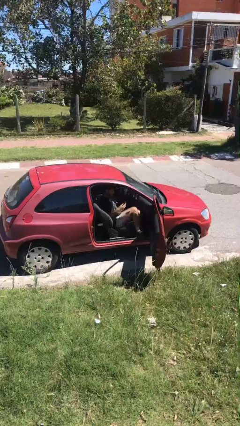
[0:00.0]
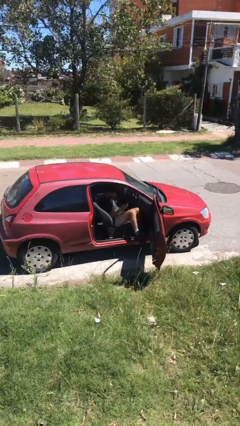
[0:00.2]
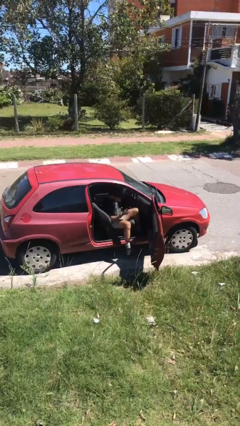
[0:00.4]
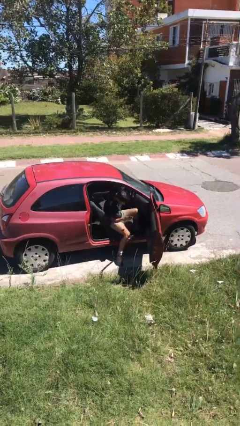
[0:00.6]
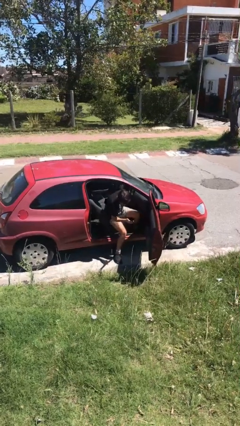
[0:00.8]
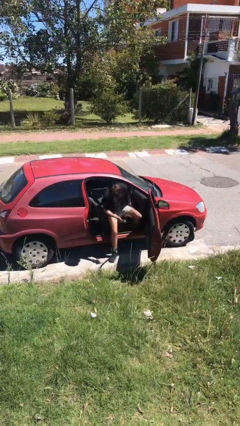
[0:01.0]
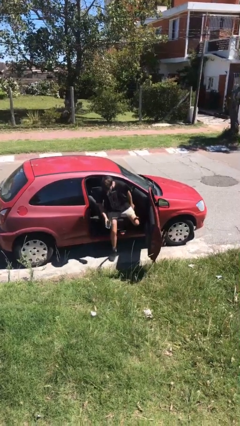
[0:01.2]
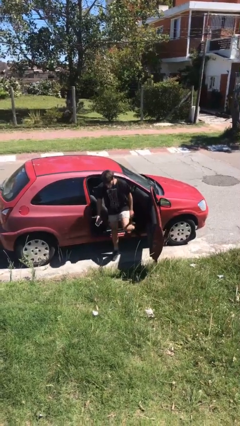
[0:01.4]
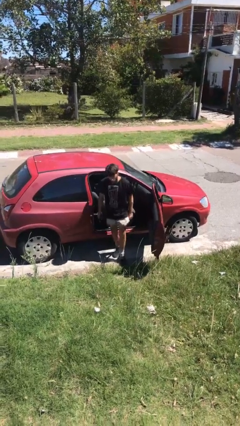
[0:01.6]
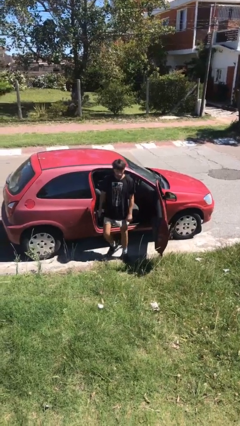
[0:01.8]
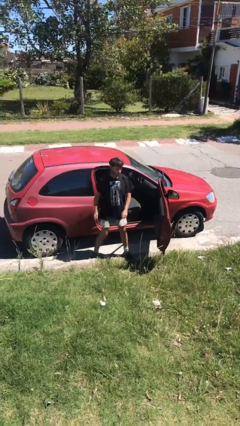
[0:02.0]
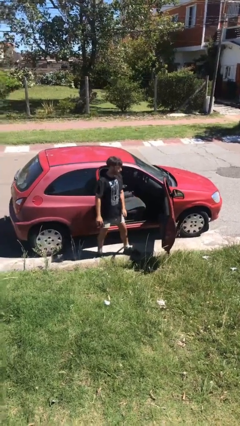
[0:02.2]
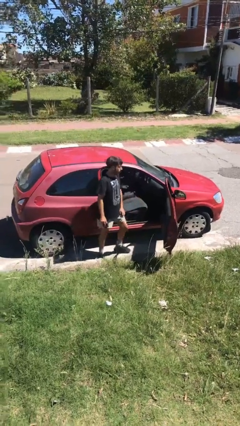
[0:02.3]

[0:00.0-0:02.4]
person exits car

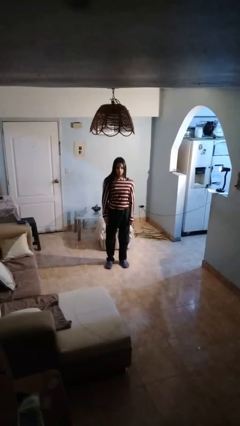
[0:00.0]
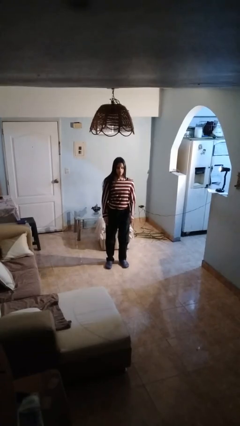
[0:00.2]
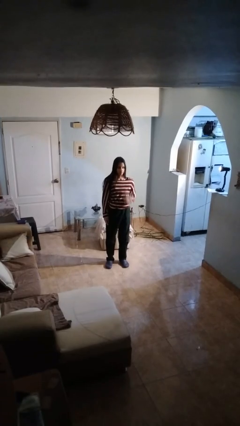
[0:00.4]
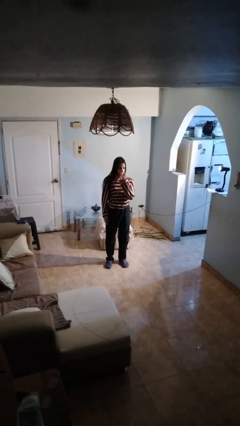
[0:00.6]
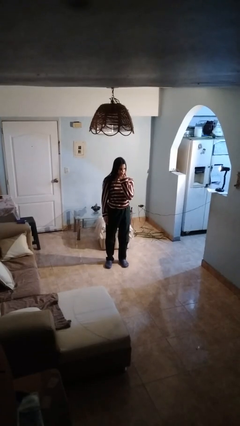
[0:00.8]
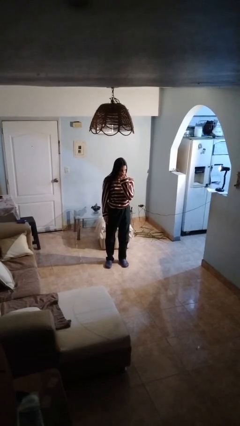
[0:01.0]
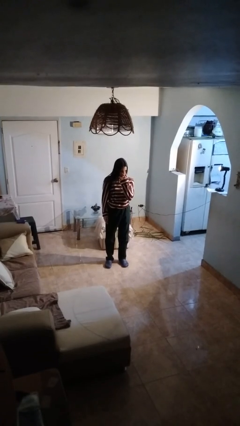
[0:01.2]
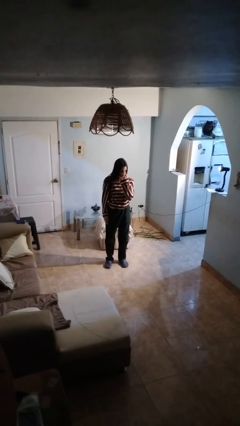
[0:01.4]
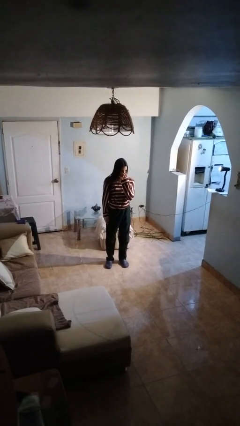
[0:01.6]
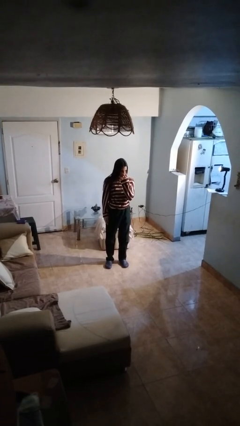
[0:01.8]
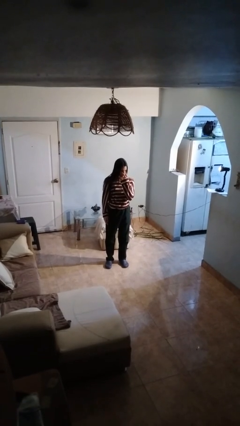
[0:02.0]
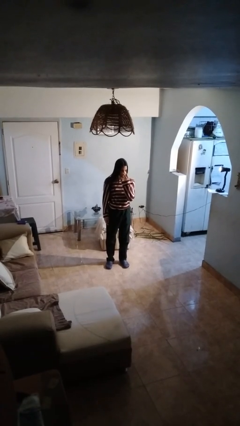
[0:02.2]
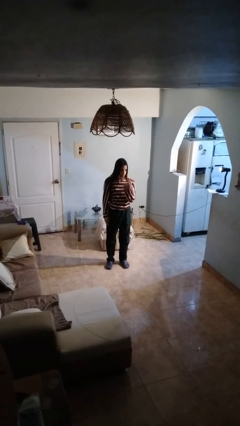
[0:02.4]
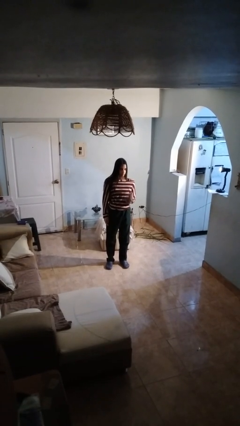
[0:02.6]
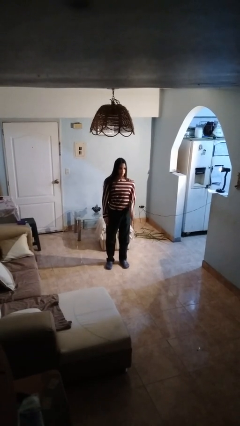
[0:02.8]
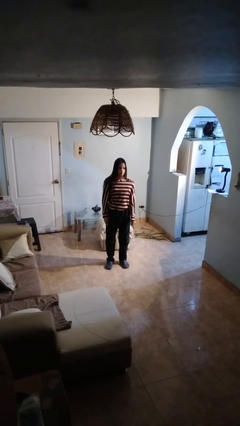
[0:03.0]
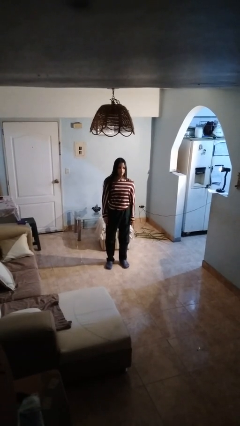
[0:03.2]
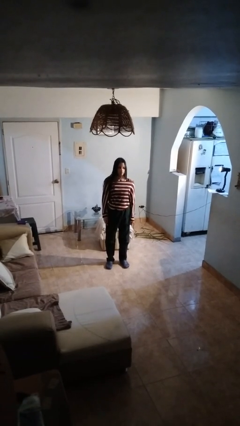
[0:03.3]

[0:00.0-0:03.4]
person gestures watch closely

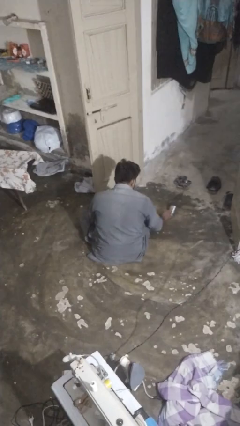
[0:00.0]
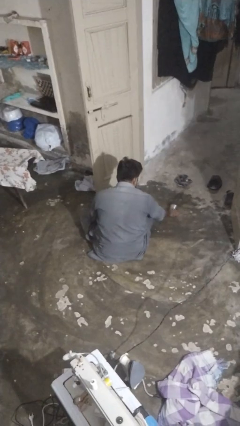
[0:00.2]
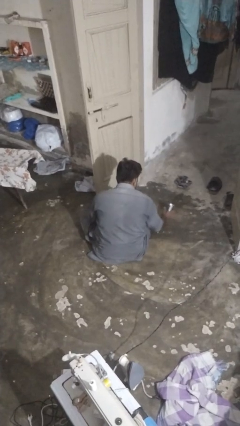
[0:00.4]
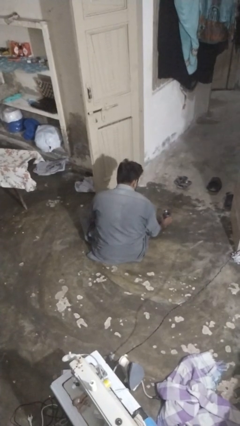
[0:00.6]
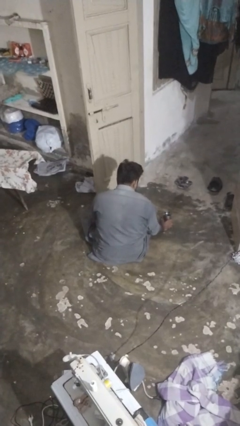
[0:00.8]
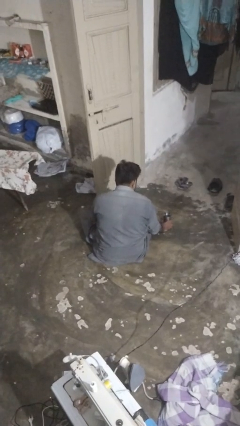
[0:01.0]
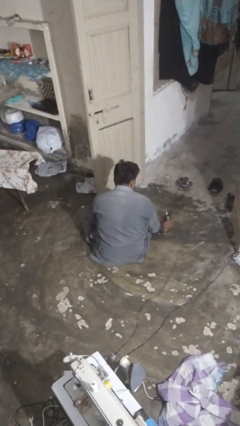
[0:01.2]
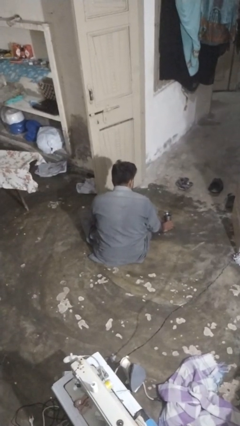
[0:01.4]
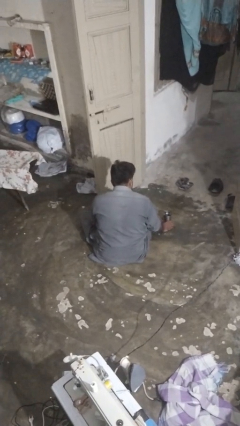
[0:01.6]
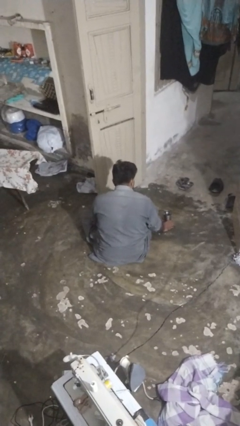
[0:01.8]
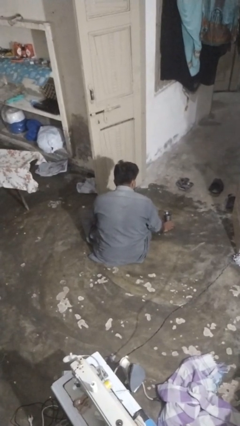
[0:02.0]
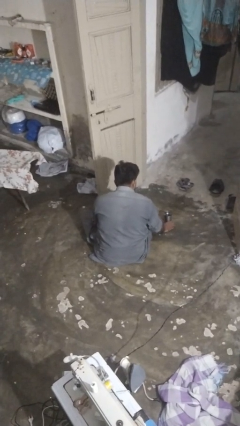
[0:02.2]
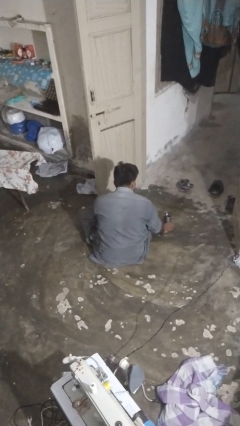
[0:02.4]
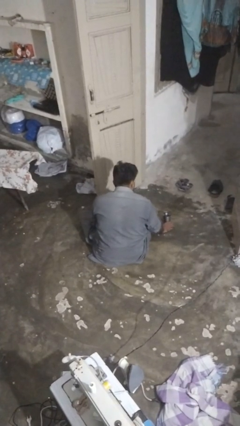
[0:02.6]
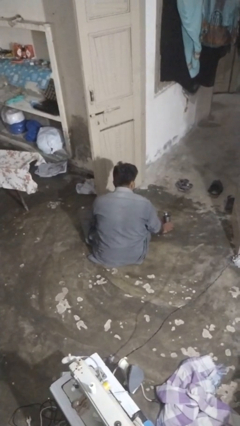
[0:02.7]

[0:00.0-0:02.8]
person sets upright glass

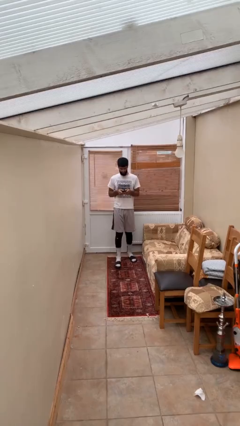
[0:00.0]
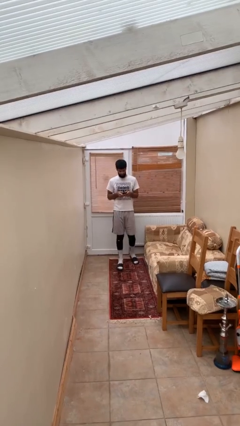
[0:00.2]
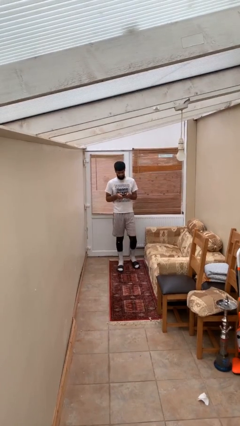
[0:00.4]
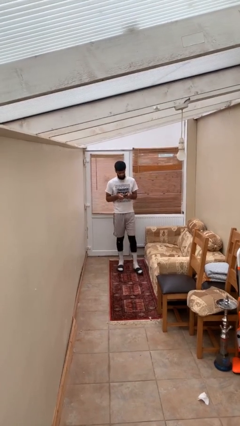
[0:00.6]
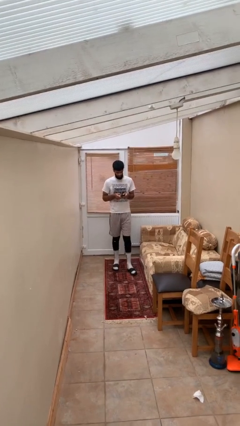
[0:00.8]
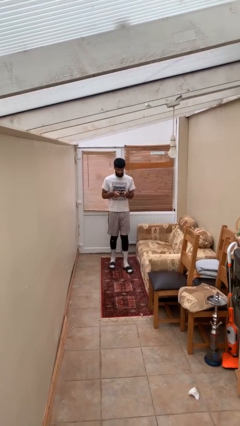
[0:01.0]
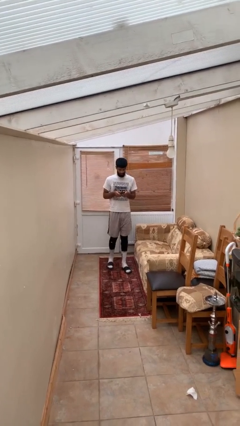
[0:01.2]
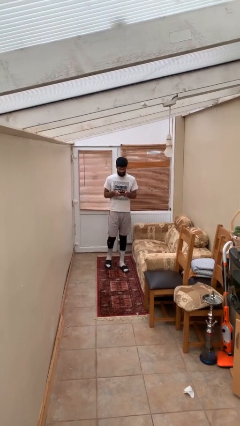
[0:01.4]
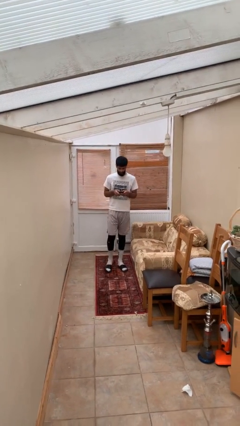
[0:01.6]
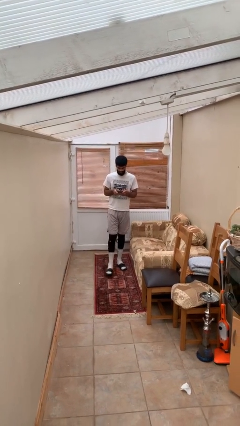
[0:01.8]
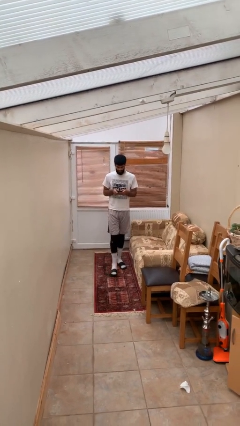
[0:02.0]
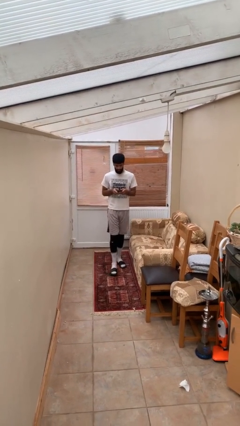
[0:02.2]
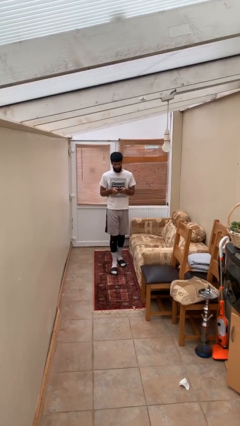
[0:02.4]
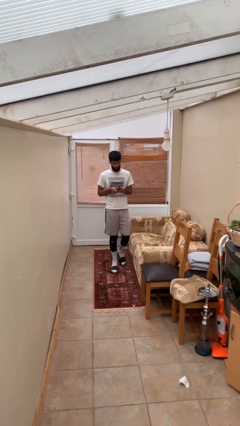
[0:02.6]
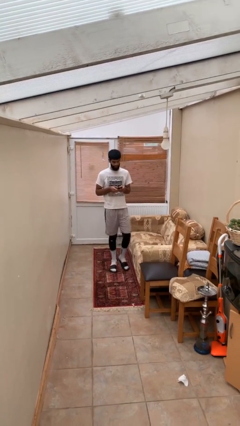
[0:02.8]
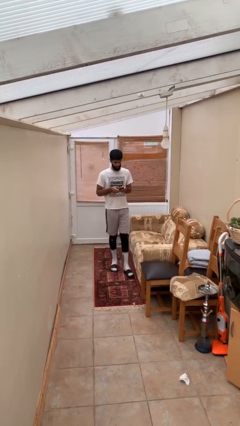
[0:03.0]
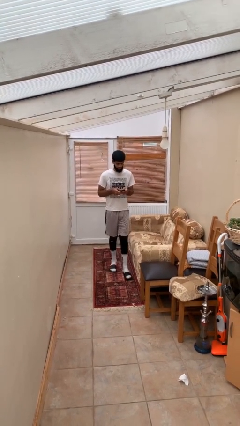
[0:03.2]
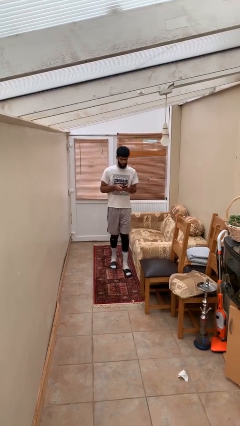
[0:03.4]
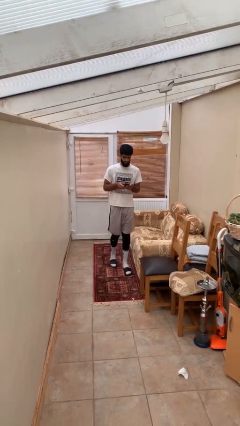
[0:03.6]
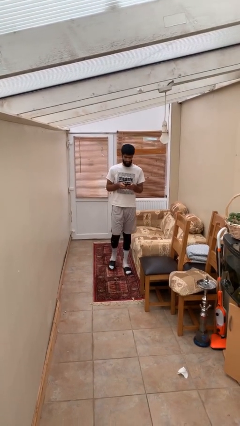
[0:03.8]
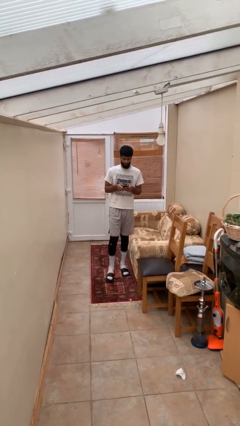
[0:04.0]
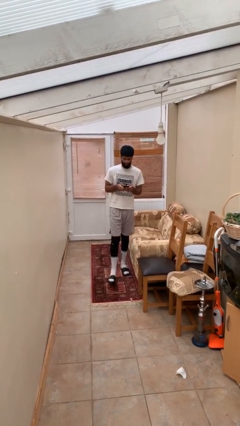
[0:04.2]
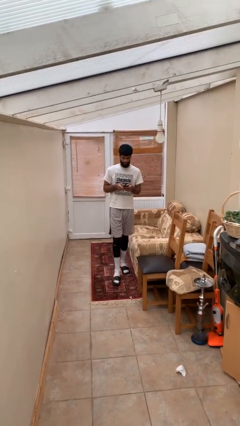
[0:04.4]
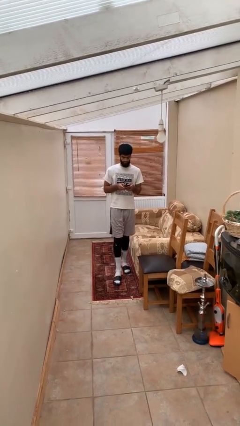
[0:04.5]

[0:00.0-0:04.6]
person texts on phone

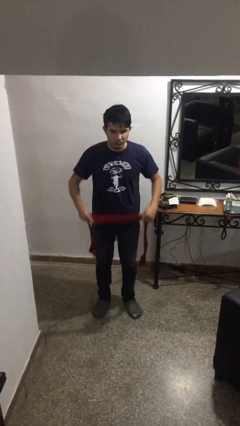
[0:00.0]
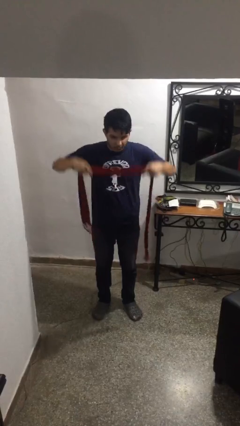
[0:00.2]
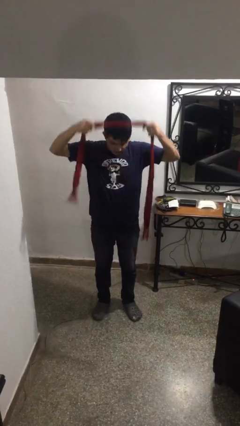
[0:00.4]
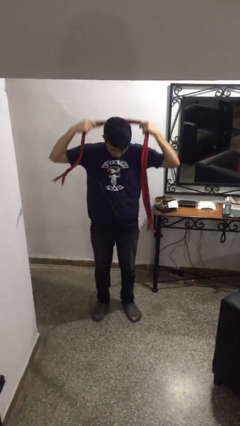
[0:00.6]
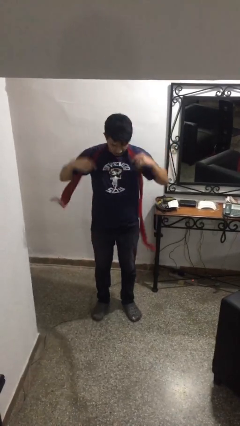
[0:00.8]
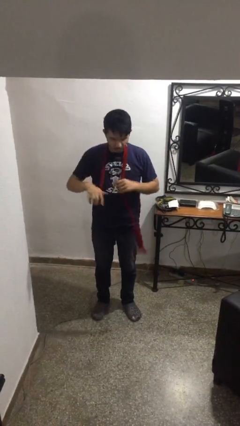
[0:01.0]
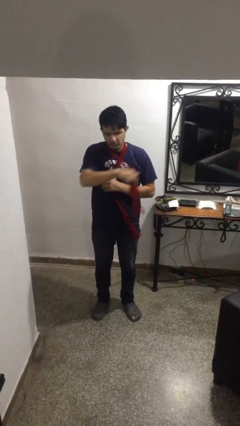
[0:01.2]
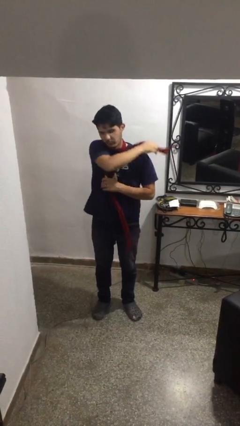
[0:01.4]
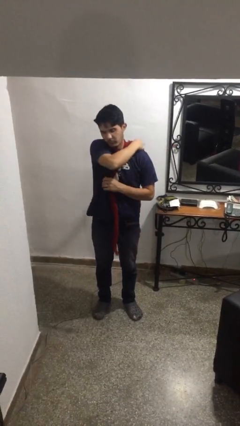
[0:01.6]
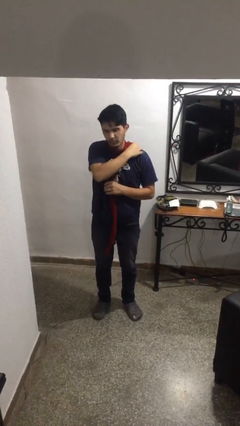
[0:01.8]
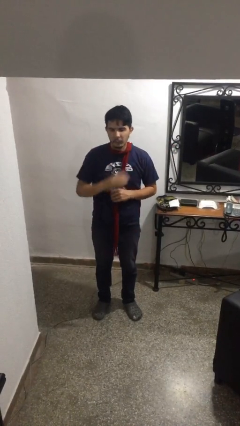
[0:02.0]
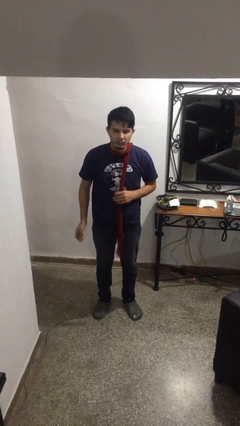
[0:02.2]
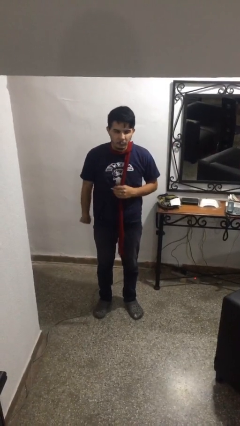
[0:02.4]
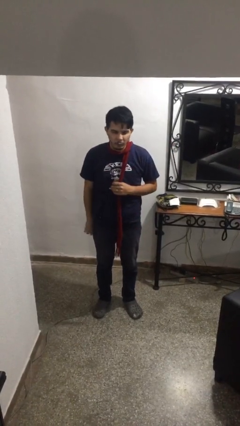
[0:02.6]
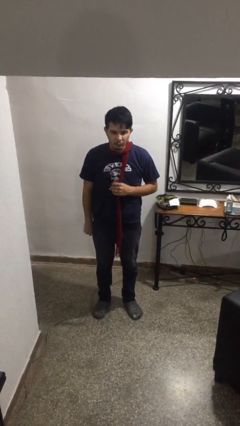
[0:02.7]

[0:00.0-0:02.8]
person puts on scarf

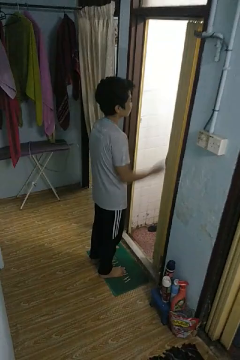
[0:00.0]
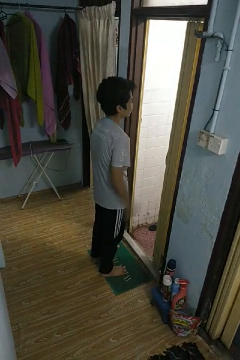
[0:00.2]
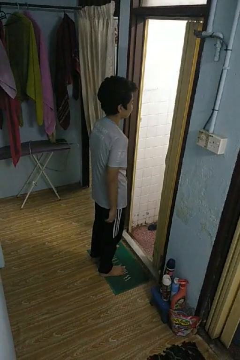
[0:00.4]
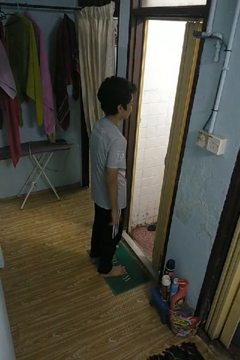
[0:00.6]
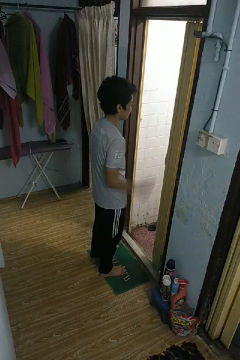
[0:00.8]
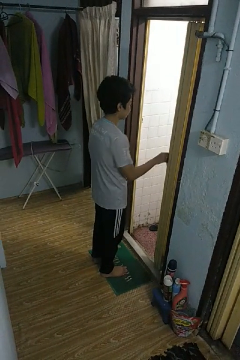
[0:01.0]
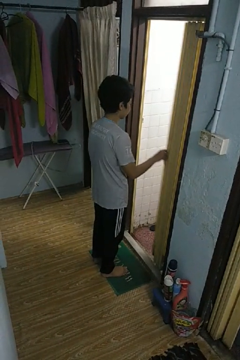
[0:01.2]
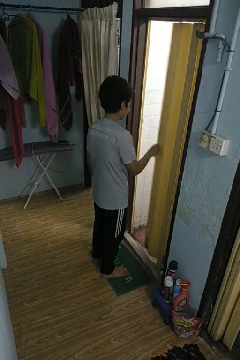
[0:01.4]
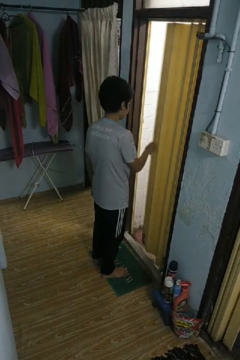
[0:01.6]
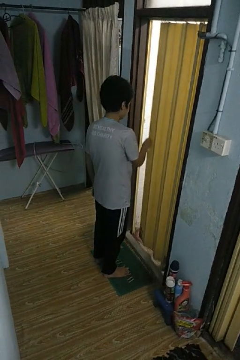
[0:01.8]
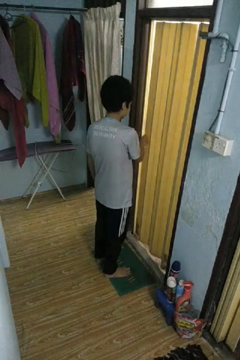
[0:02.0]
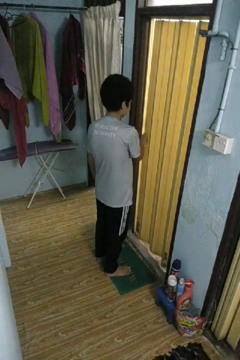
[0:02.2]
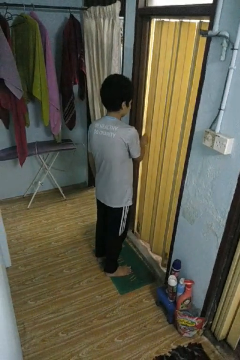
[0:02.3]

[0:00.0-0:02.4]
person closes sliding door
